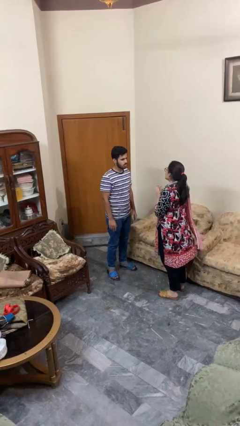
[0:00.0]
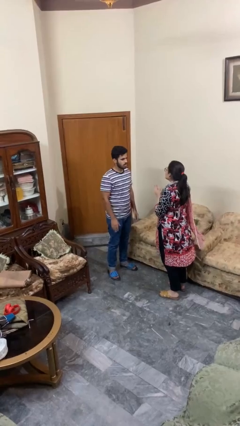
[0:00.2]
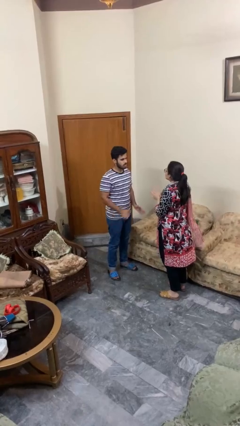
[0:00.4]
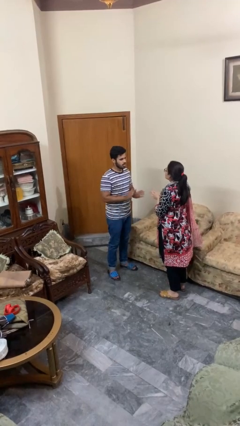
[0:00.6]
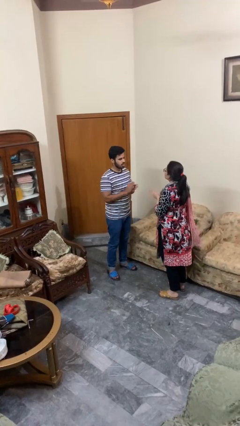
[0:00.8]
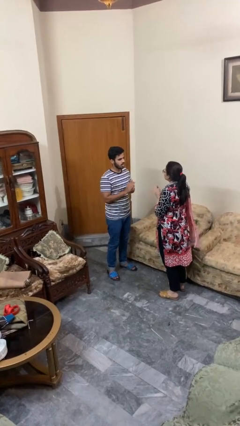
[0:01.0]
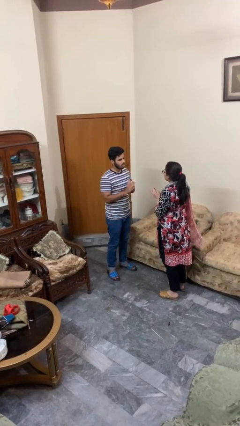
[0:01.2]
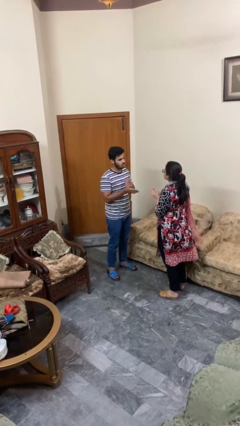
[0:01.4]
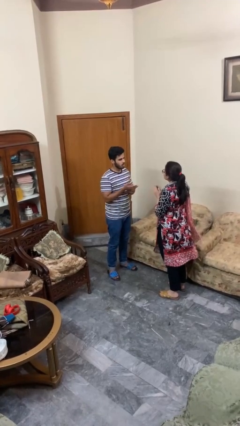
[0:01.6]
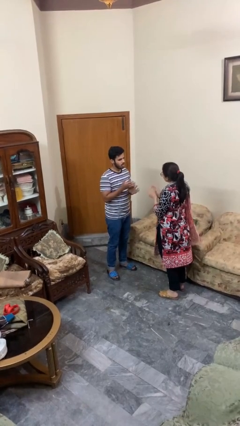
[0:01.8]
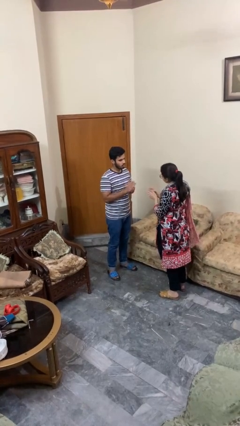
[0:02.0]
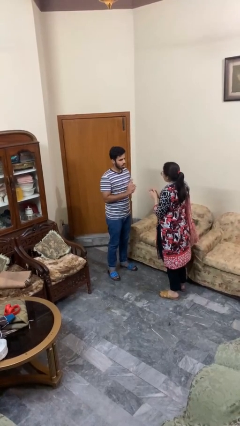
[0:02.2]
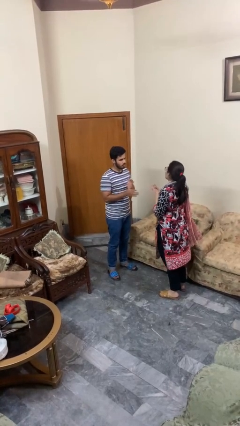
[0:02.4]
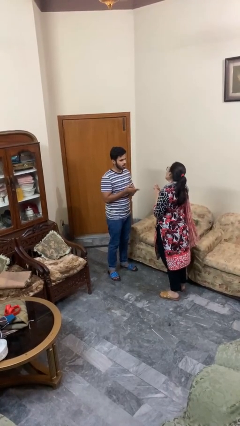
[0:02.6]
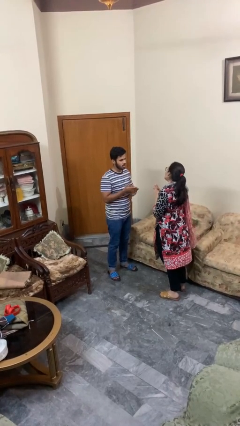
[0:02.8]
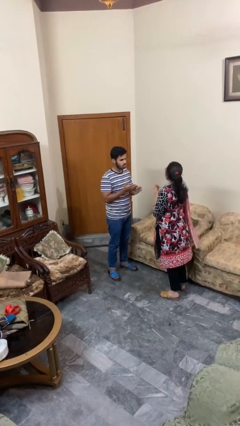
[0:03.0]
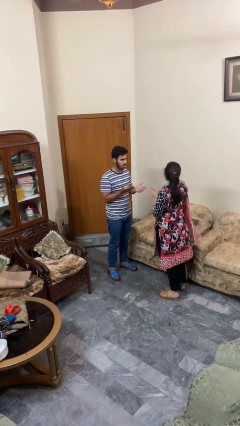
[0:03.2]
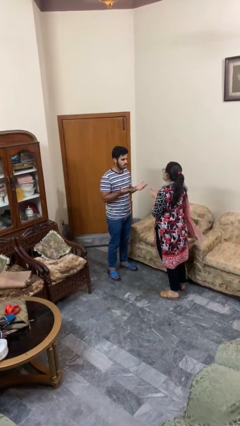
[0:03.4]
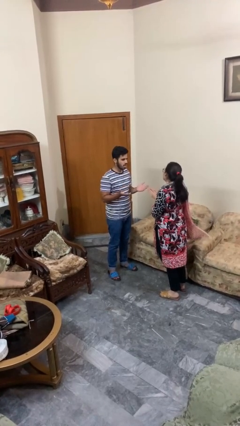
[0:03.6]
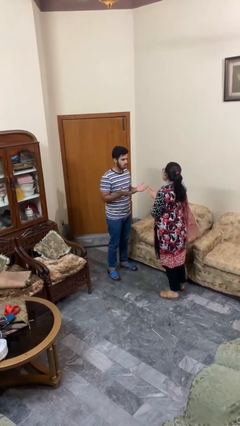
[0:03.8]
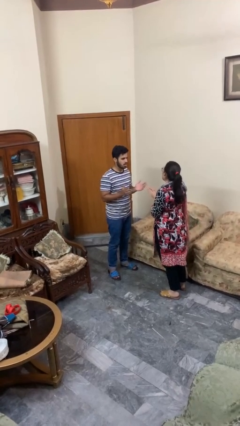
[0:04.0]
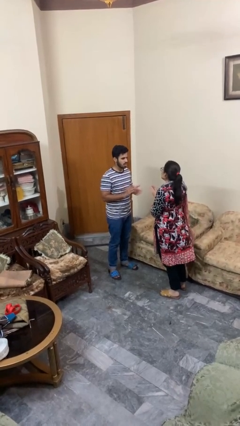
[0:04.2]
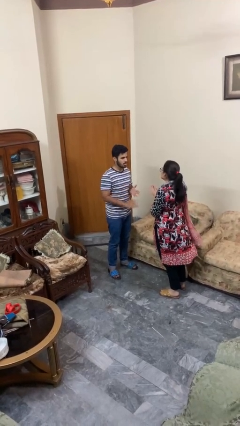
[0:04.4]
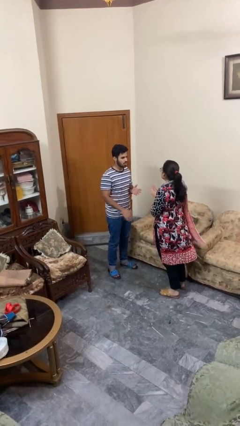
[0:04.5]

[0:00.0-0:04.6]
person talks to person

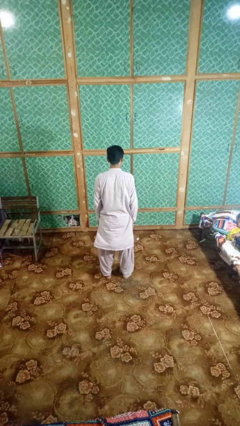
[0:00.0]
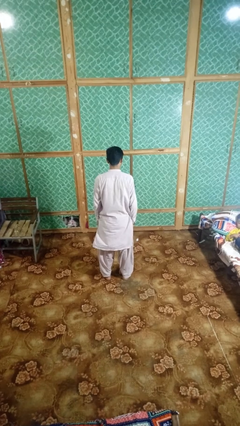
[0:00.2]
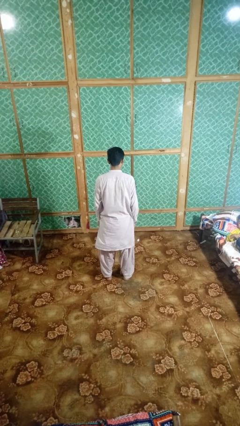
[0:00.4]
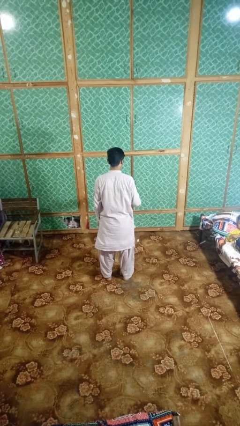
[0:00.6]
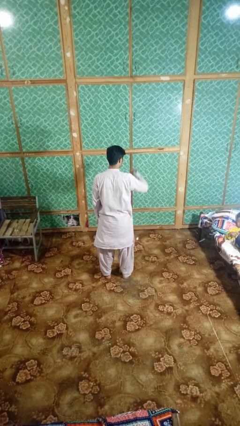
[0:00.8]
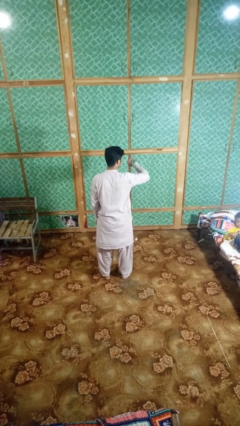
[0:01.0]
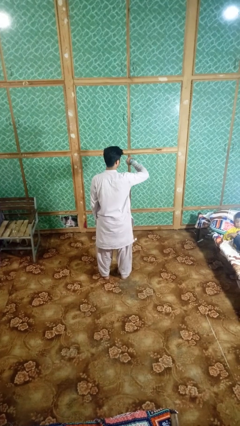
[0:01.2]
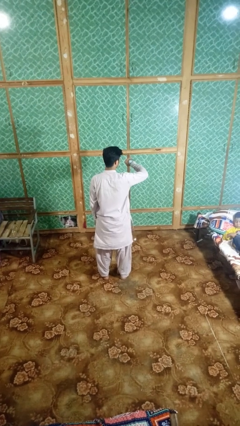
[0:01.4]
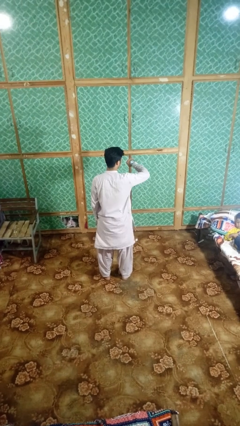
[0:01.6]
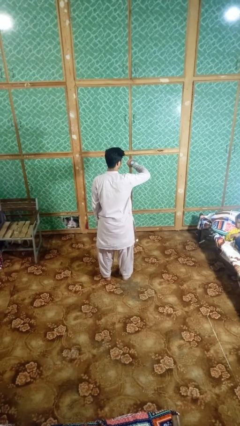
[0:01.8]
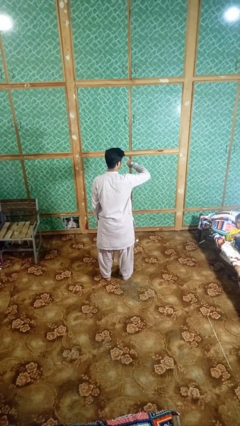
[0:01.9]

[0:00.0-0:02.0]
person looks at wristwatch

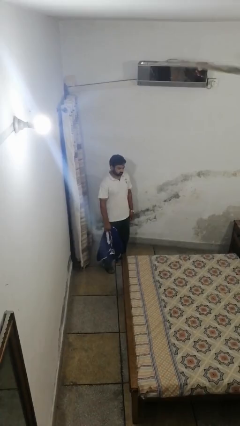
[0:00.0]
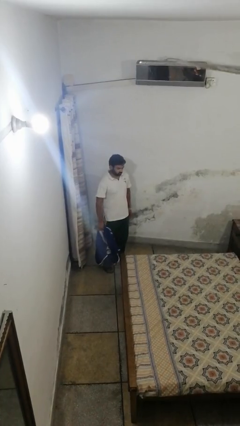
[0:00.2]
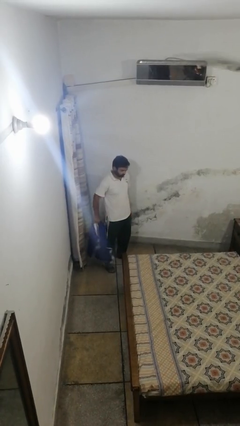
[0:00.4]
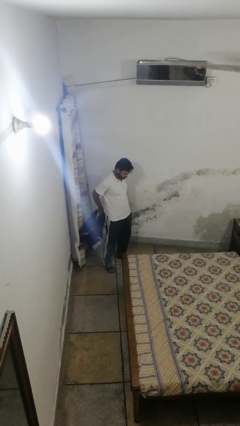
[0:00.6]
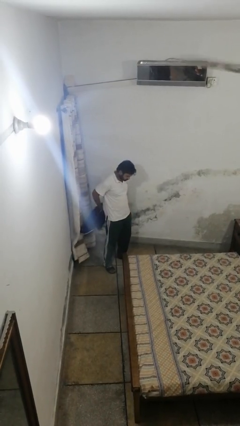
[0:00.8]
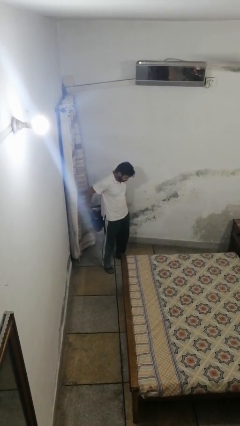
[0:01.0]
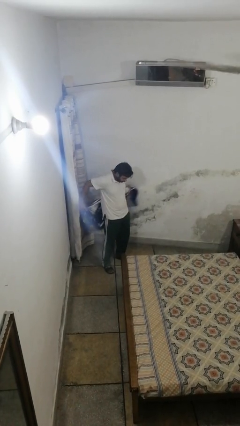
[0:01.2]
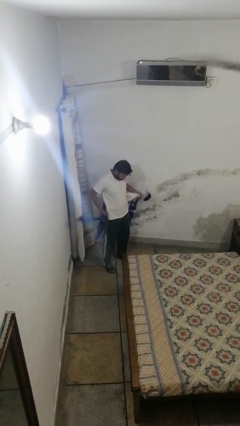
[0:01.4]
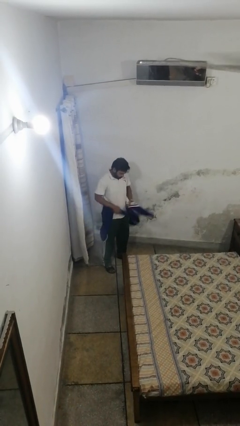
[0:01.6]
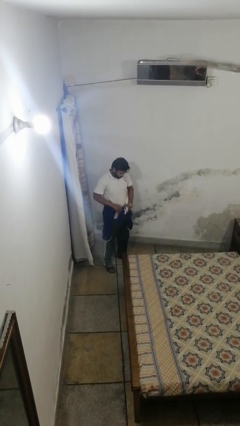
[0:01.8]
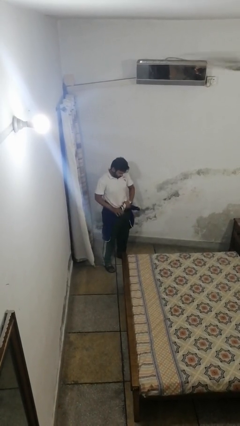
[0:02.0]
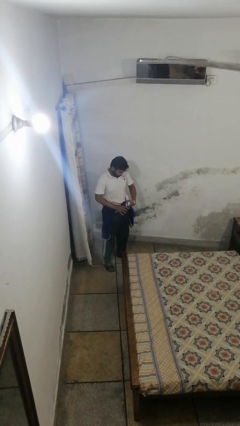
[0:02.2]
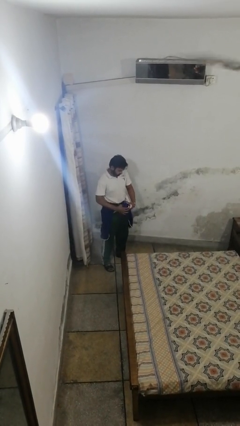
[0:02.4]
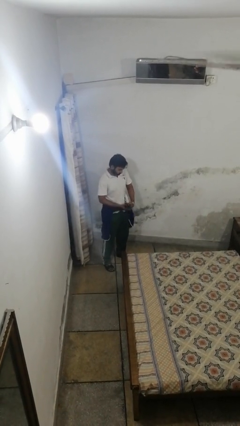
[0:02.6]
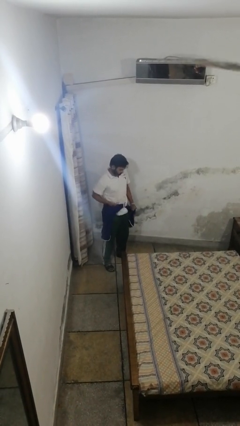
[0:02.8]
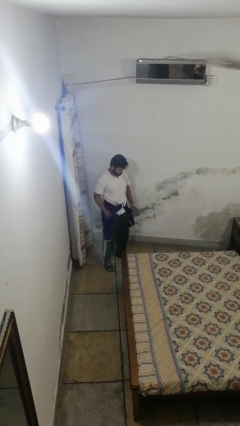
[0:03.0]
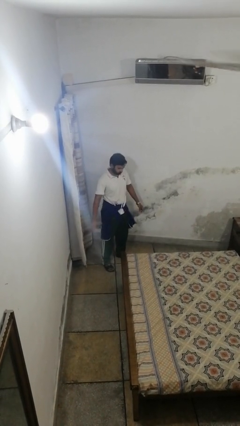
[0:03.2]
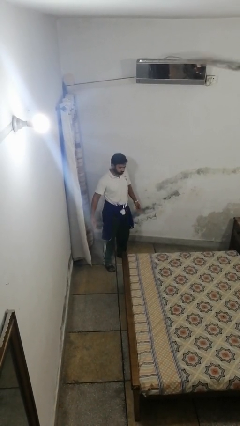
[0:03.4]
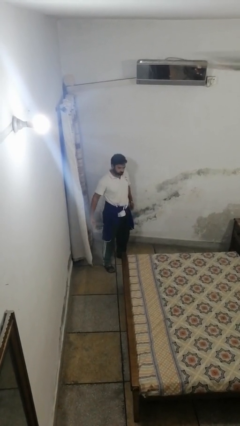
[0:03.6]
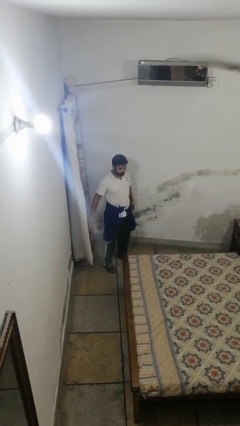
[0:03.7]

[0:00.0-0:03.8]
person ties jacket around waist

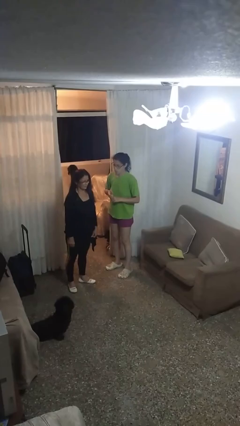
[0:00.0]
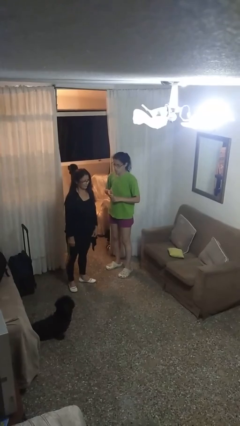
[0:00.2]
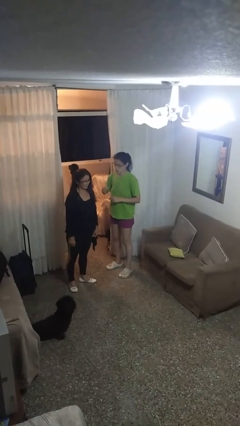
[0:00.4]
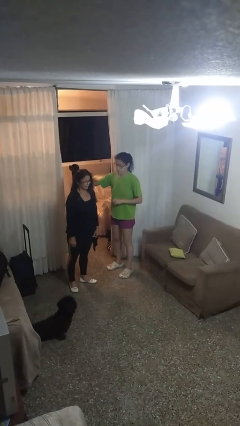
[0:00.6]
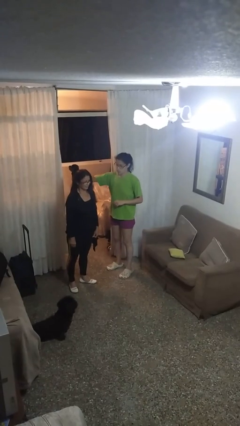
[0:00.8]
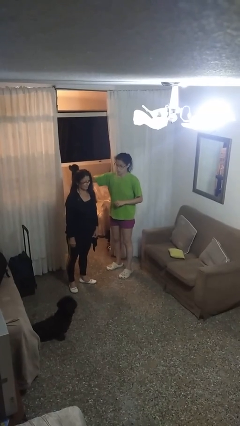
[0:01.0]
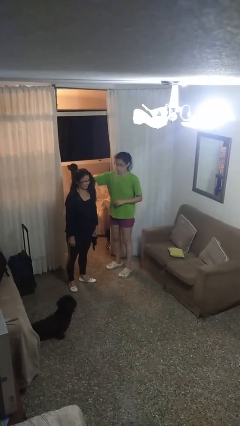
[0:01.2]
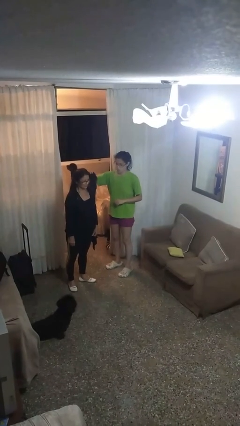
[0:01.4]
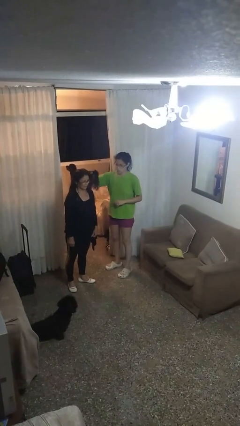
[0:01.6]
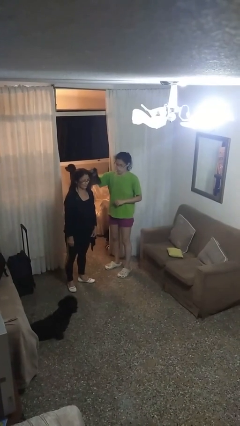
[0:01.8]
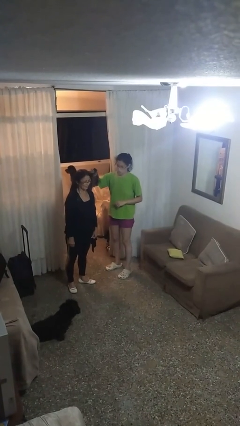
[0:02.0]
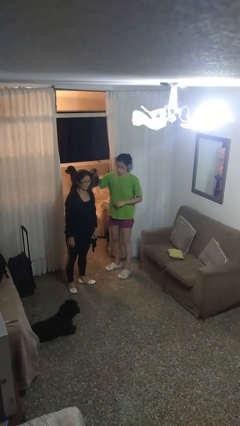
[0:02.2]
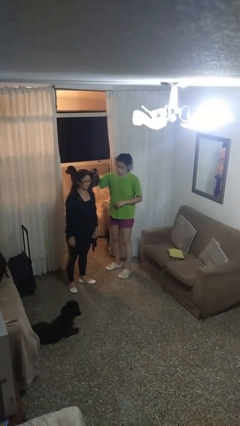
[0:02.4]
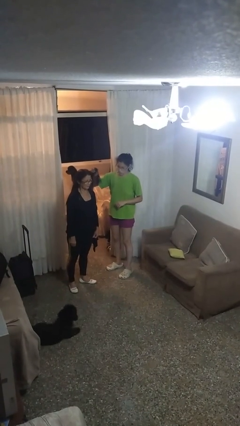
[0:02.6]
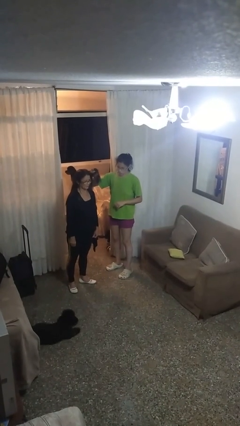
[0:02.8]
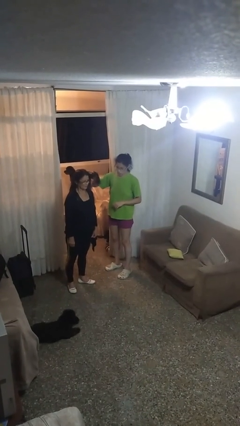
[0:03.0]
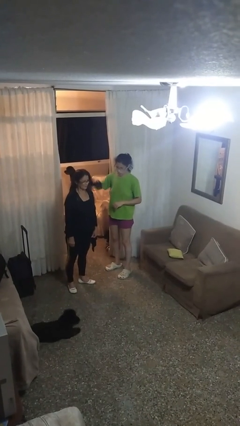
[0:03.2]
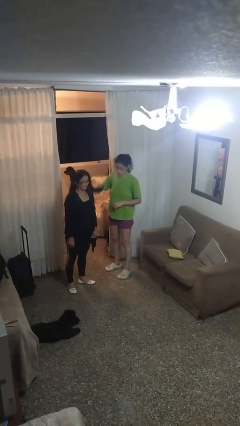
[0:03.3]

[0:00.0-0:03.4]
person grabs person by hair

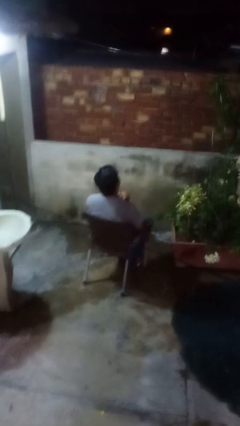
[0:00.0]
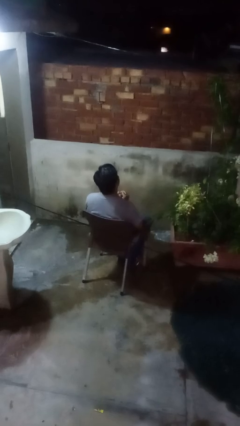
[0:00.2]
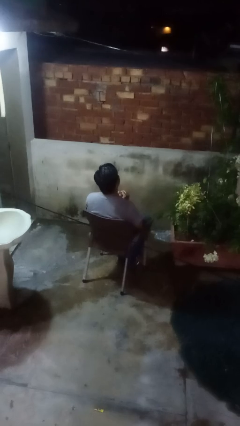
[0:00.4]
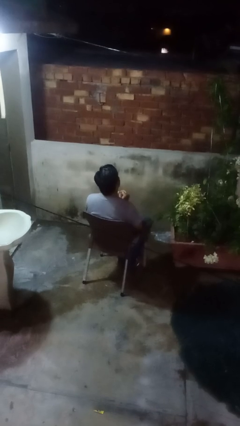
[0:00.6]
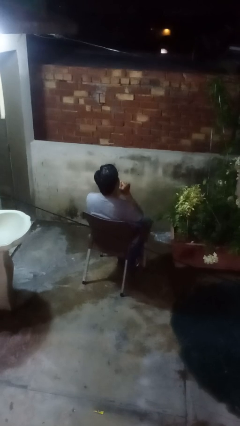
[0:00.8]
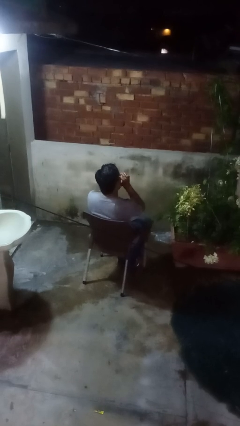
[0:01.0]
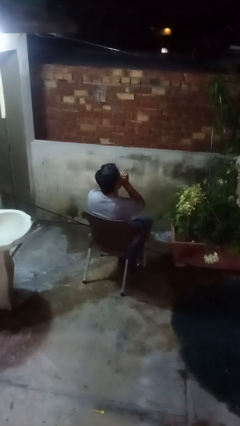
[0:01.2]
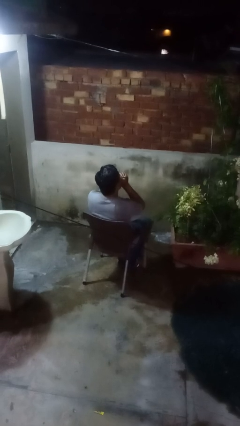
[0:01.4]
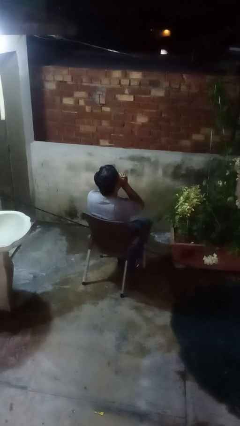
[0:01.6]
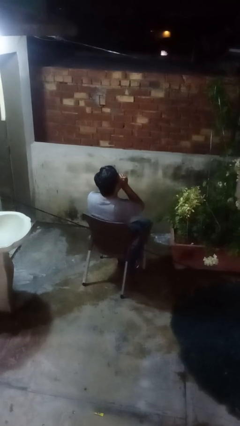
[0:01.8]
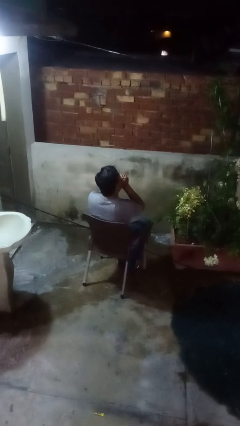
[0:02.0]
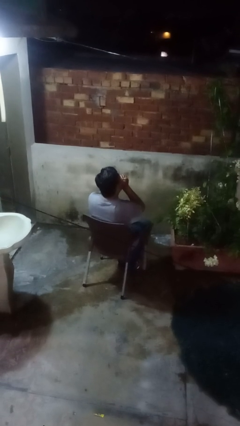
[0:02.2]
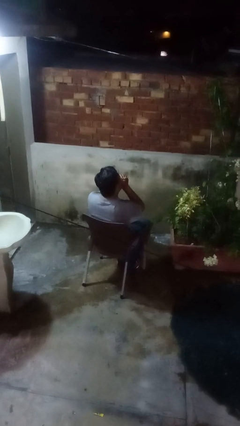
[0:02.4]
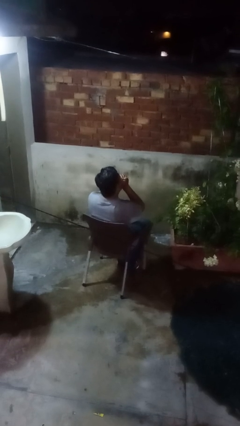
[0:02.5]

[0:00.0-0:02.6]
person blows into hands

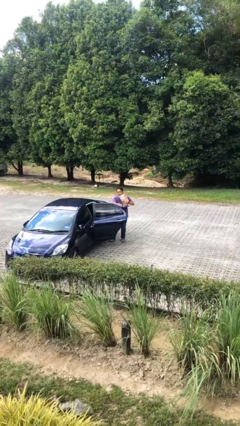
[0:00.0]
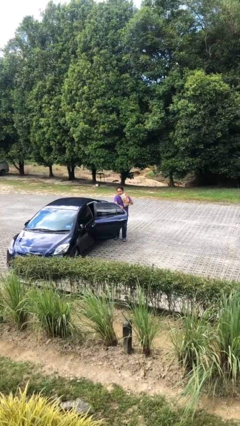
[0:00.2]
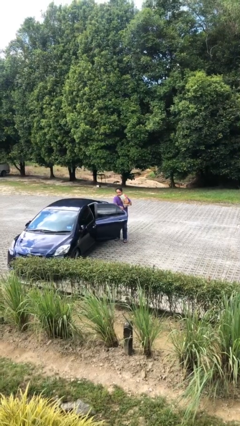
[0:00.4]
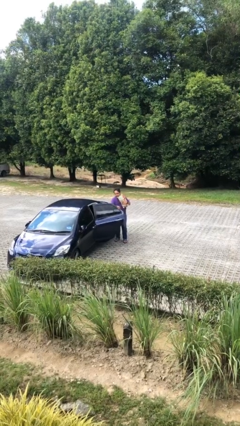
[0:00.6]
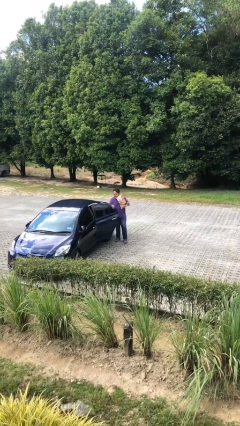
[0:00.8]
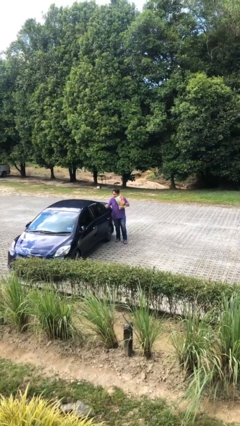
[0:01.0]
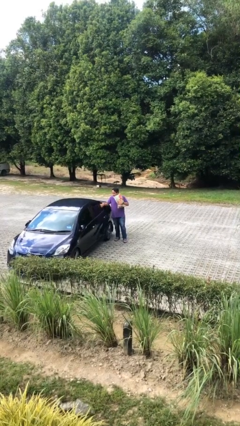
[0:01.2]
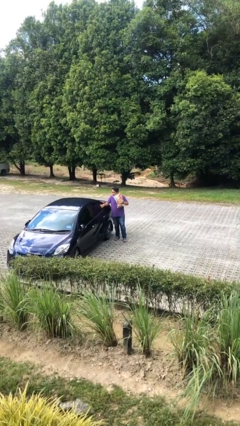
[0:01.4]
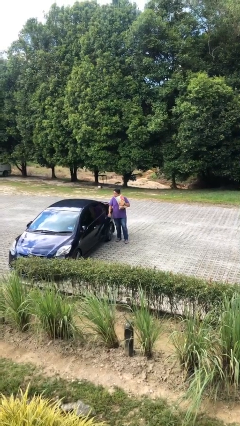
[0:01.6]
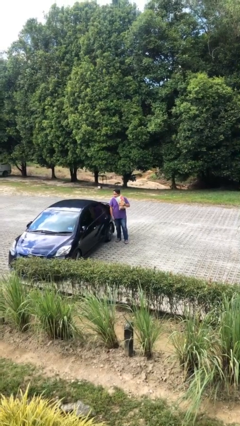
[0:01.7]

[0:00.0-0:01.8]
person closes car door
